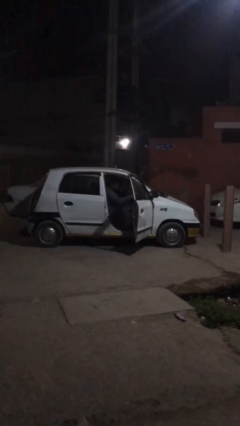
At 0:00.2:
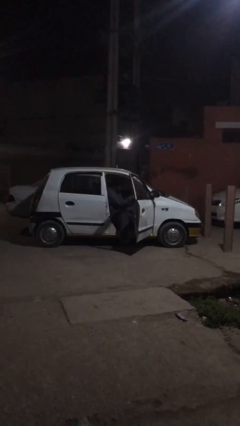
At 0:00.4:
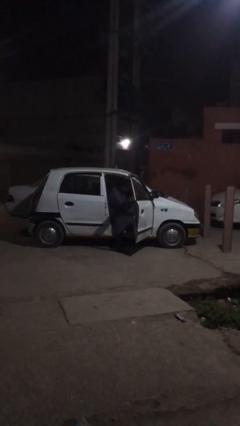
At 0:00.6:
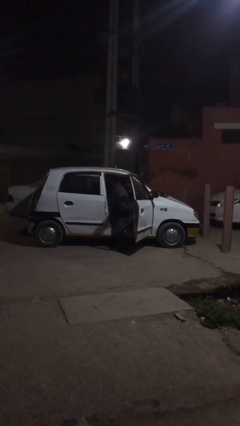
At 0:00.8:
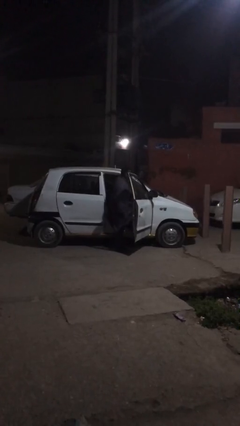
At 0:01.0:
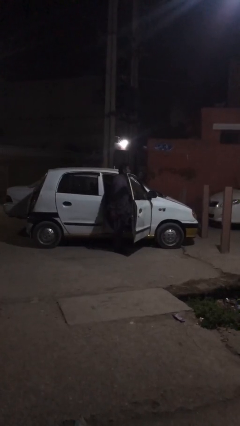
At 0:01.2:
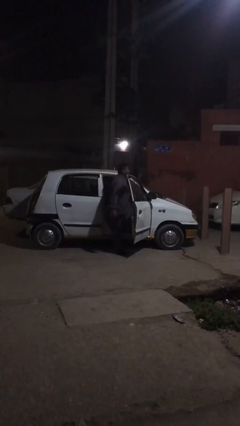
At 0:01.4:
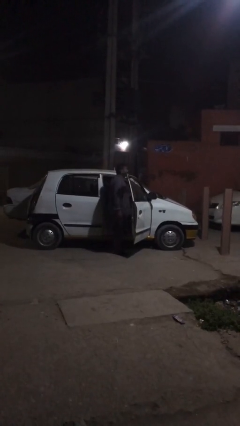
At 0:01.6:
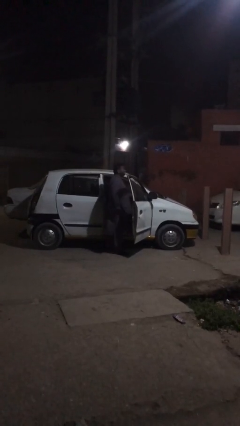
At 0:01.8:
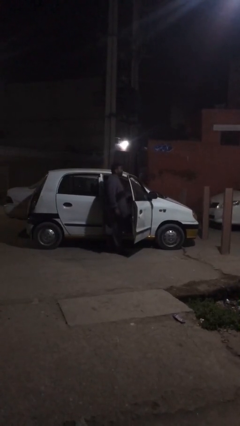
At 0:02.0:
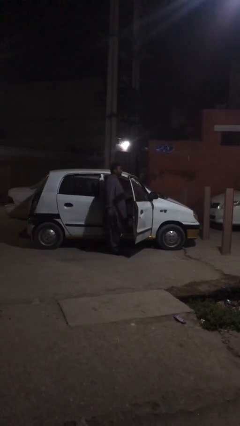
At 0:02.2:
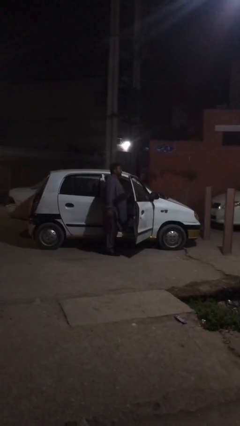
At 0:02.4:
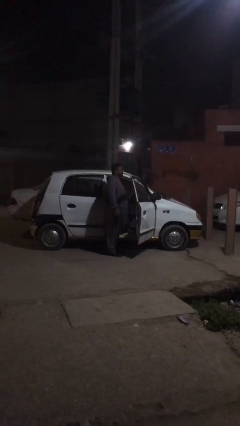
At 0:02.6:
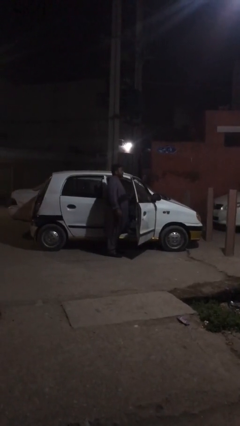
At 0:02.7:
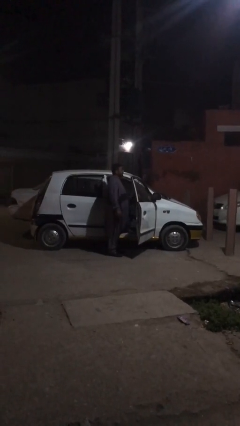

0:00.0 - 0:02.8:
person exits car

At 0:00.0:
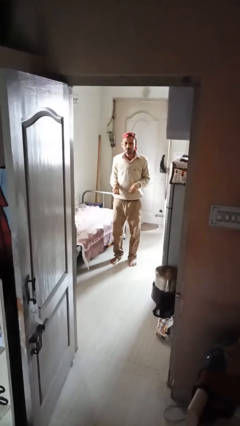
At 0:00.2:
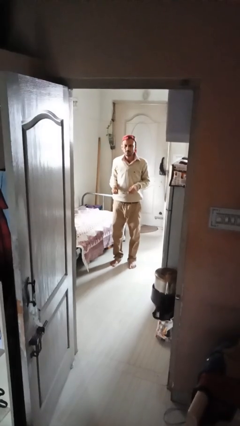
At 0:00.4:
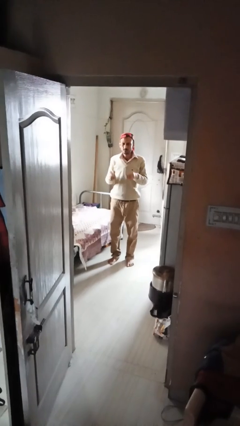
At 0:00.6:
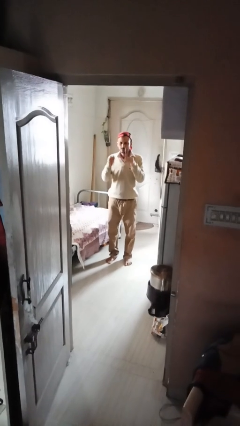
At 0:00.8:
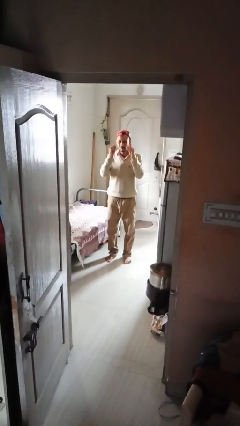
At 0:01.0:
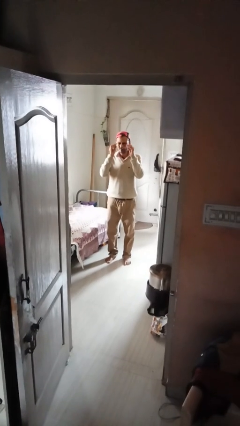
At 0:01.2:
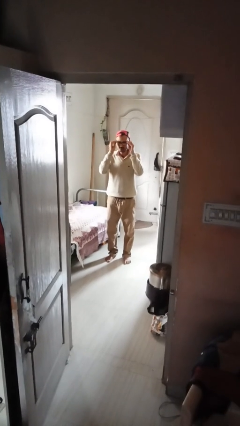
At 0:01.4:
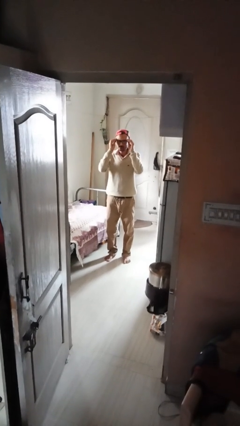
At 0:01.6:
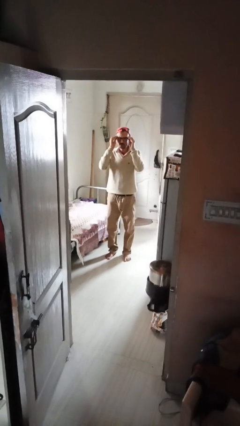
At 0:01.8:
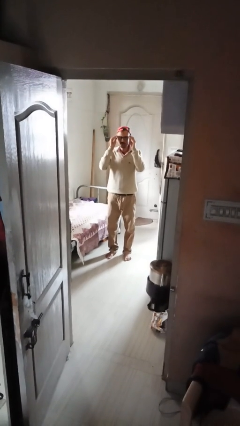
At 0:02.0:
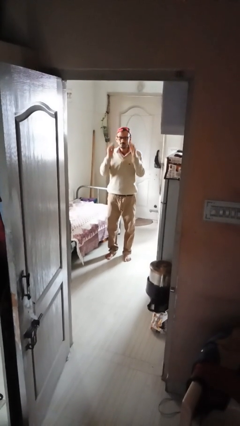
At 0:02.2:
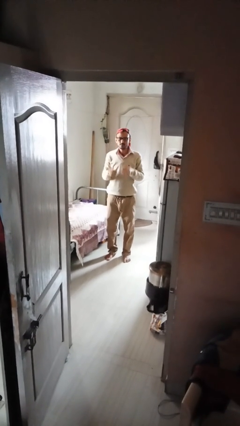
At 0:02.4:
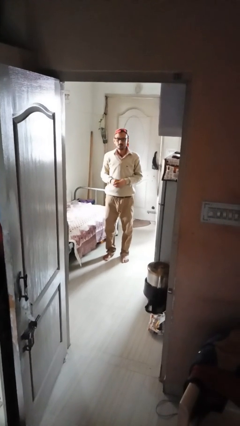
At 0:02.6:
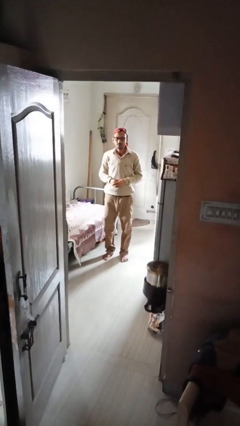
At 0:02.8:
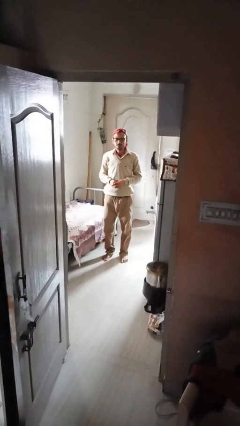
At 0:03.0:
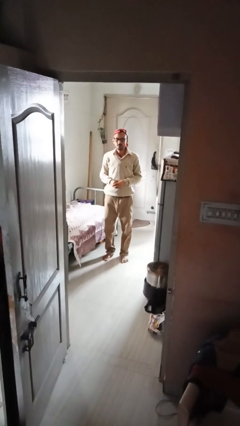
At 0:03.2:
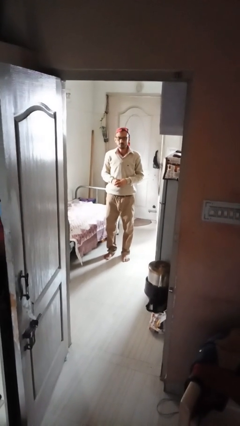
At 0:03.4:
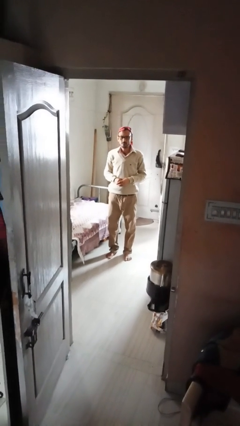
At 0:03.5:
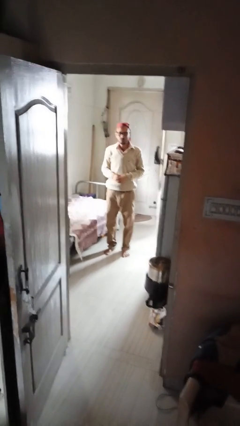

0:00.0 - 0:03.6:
person puts on sunglasses

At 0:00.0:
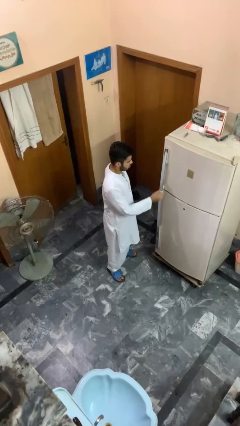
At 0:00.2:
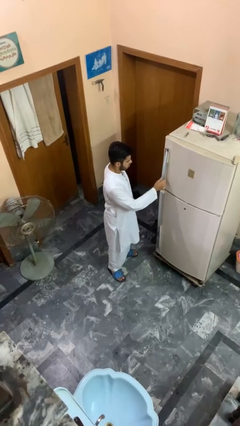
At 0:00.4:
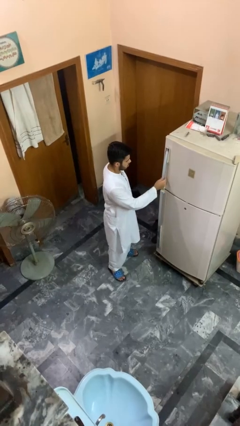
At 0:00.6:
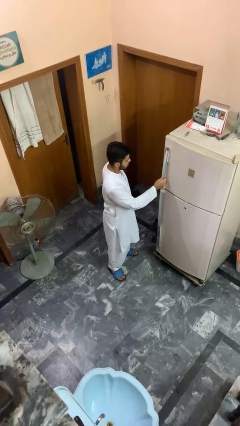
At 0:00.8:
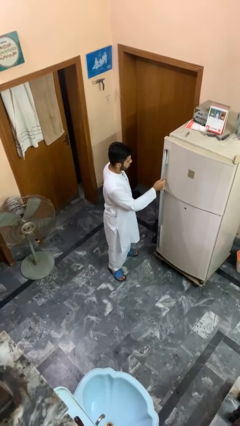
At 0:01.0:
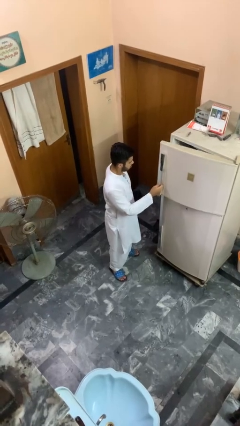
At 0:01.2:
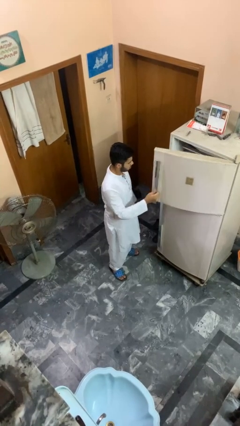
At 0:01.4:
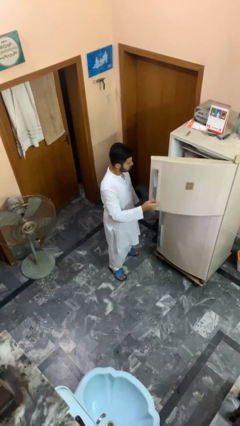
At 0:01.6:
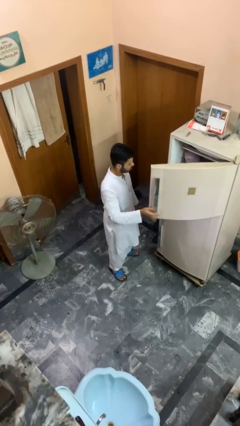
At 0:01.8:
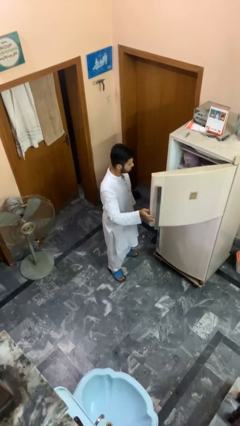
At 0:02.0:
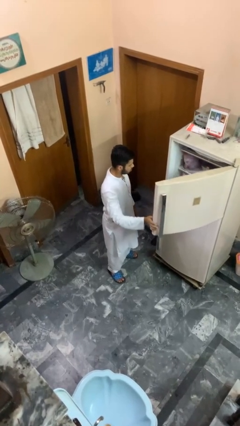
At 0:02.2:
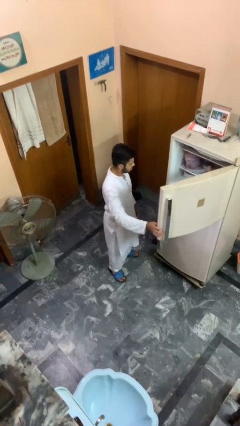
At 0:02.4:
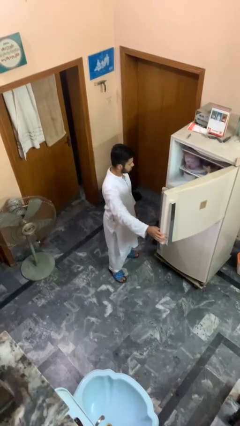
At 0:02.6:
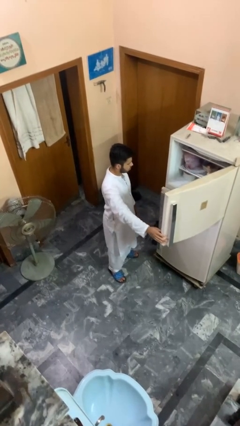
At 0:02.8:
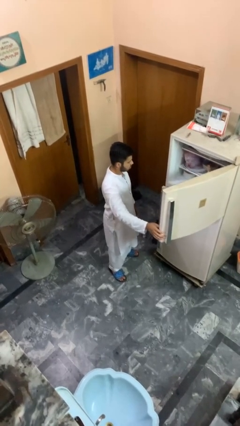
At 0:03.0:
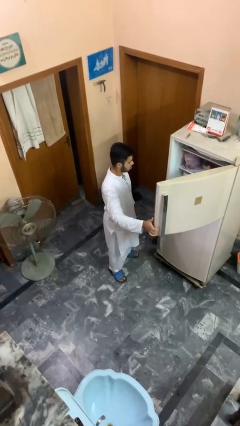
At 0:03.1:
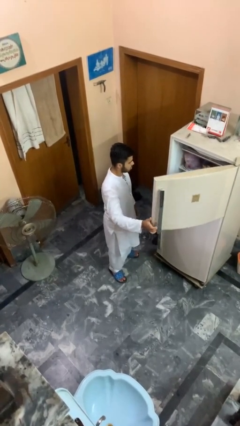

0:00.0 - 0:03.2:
person opens refrigerator

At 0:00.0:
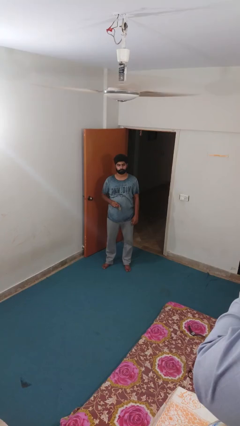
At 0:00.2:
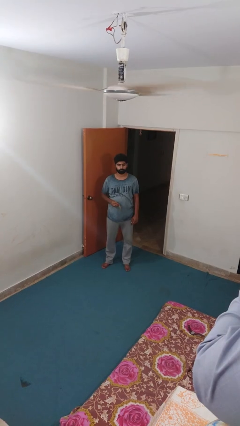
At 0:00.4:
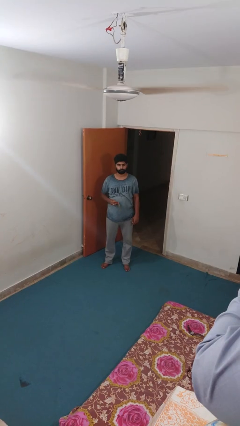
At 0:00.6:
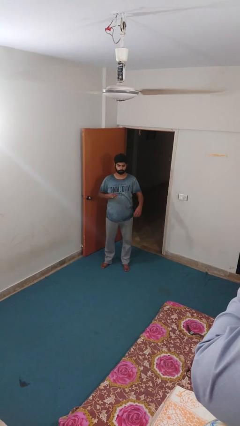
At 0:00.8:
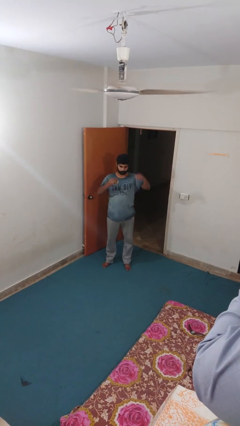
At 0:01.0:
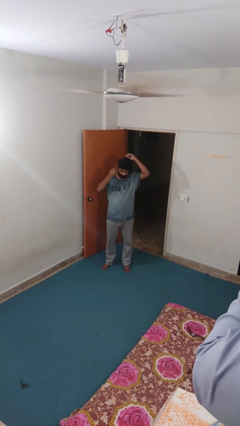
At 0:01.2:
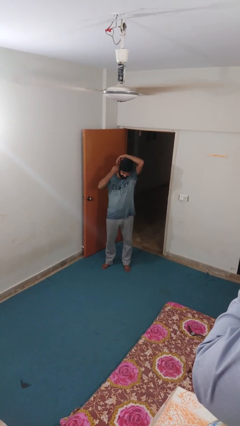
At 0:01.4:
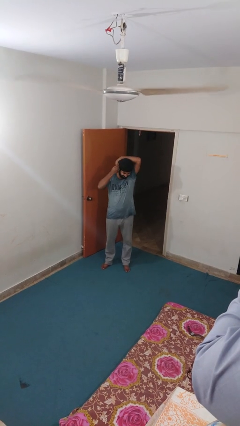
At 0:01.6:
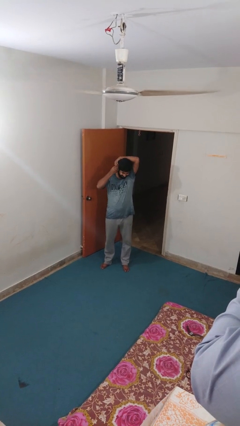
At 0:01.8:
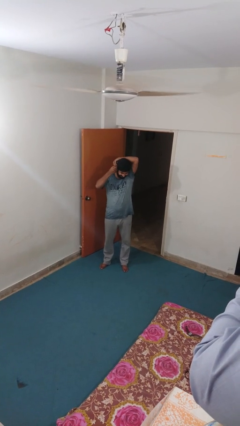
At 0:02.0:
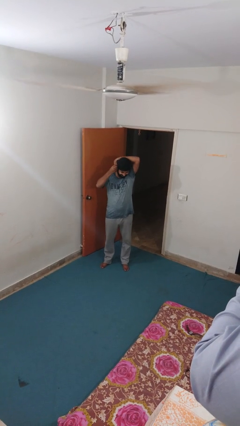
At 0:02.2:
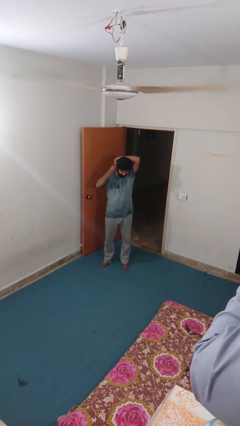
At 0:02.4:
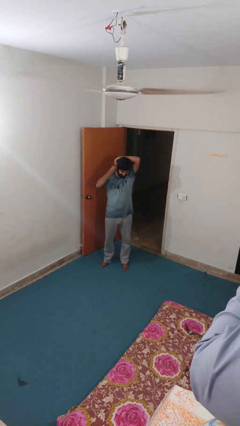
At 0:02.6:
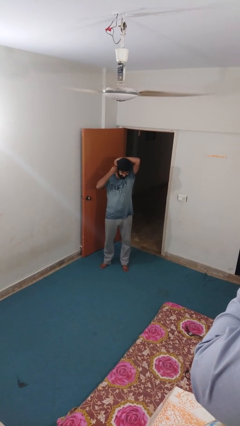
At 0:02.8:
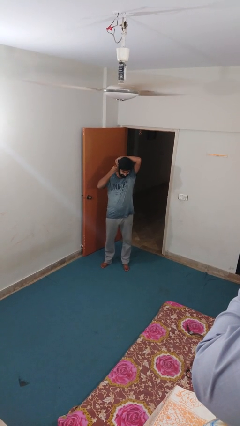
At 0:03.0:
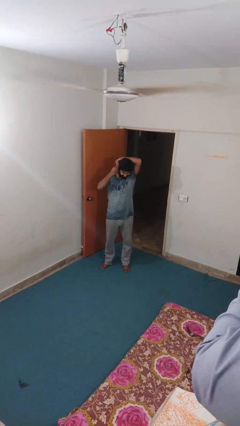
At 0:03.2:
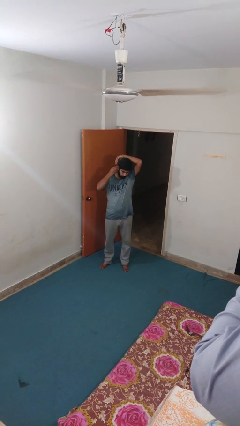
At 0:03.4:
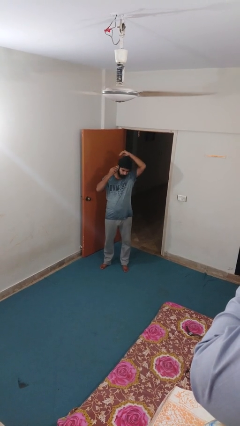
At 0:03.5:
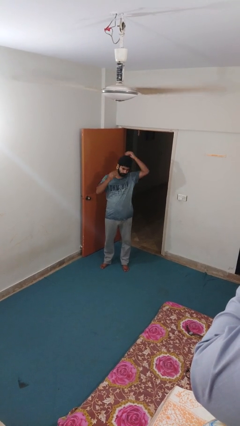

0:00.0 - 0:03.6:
person puts on earrings

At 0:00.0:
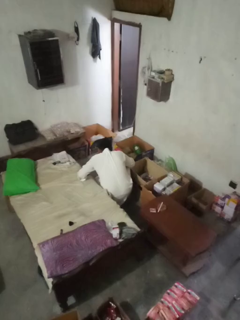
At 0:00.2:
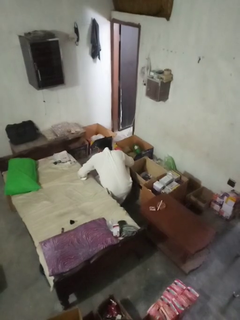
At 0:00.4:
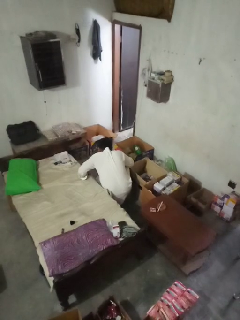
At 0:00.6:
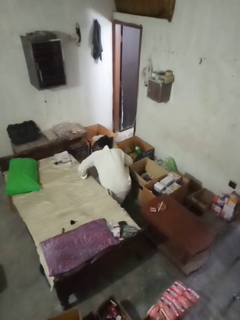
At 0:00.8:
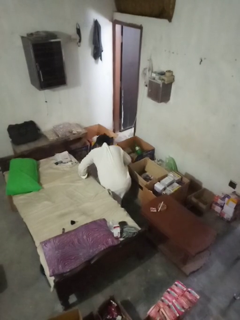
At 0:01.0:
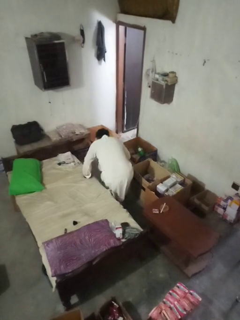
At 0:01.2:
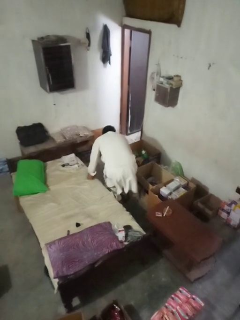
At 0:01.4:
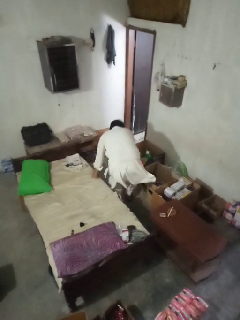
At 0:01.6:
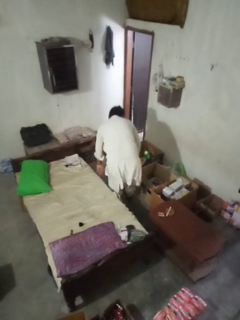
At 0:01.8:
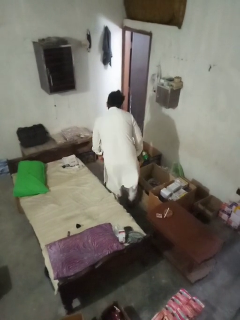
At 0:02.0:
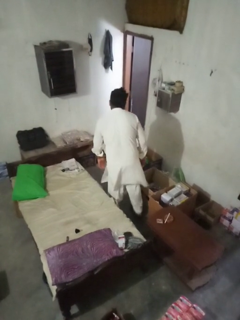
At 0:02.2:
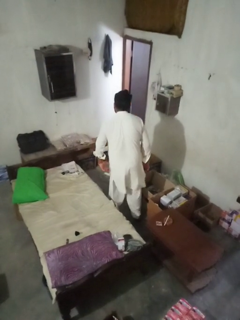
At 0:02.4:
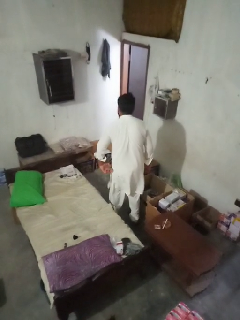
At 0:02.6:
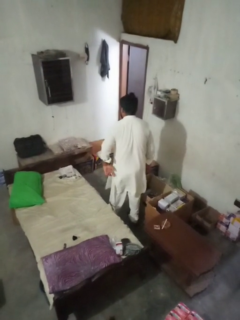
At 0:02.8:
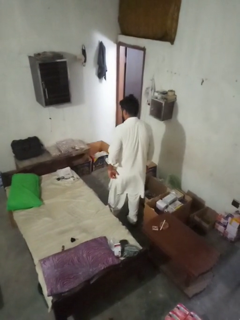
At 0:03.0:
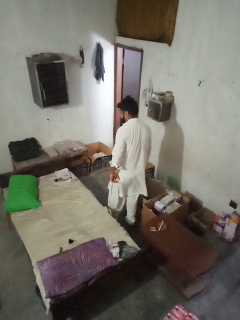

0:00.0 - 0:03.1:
person stands up from floor

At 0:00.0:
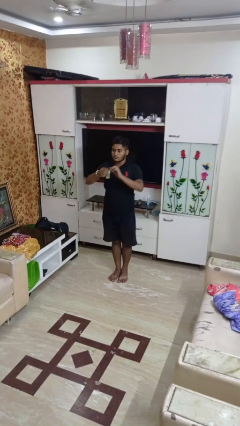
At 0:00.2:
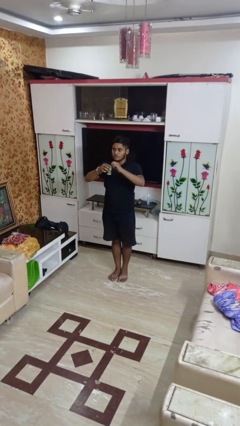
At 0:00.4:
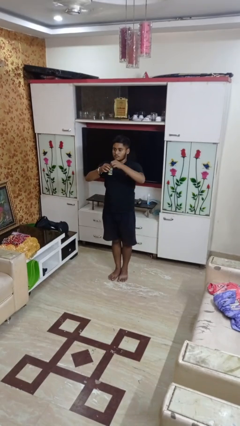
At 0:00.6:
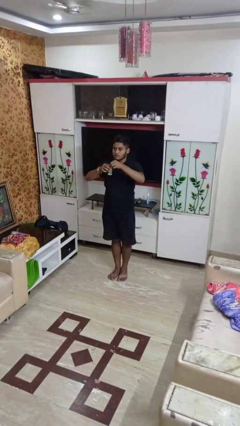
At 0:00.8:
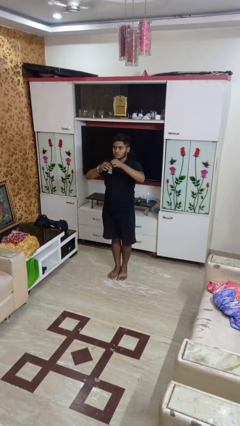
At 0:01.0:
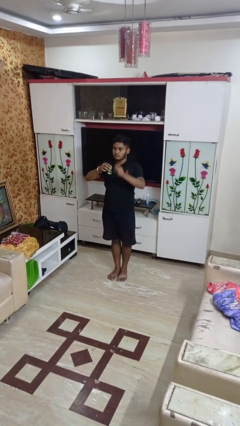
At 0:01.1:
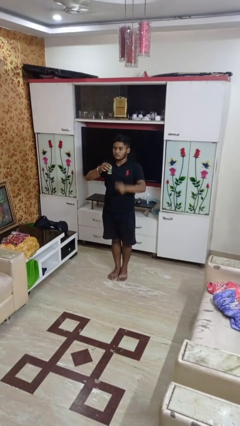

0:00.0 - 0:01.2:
person opens beverage can

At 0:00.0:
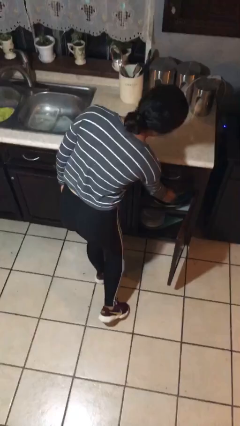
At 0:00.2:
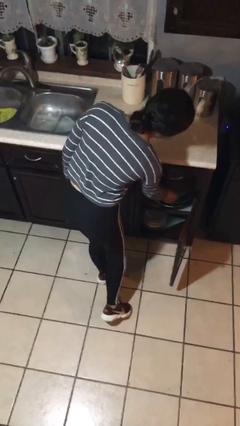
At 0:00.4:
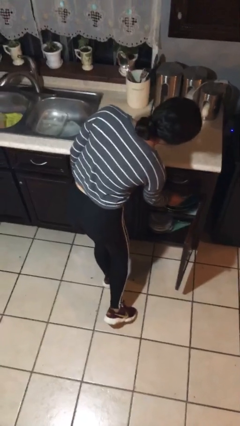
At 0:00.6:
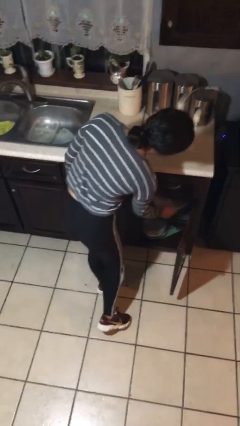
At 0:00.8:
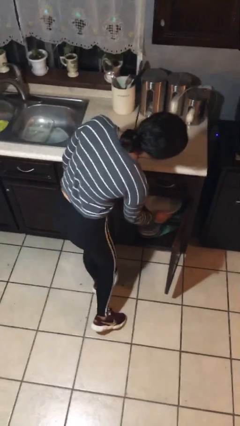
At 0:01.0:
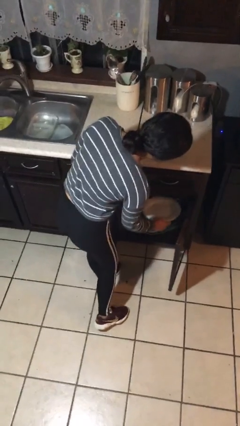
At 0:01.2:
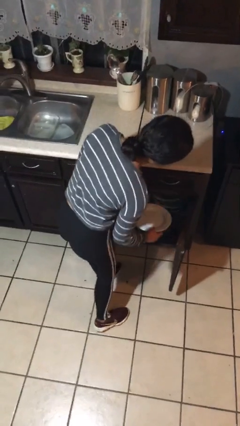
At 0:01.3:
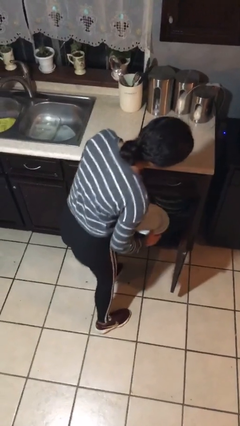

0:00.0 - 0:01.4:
person puts object in cabinet
